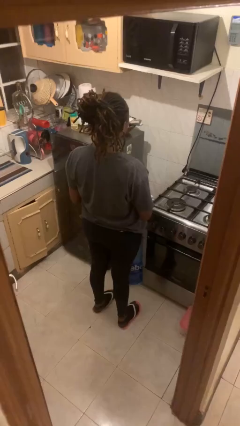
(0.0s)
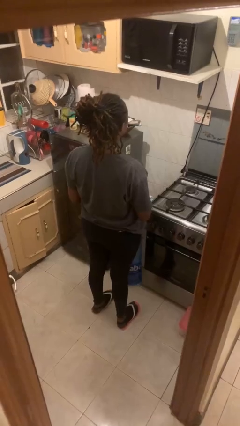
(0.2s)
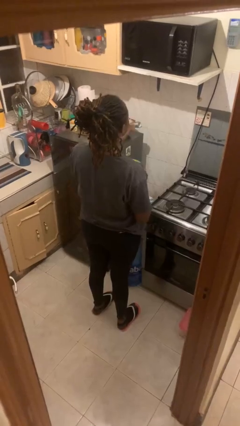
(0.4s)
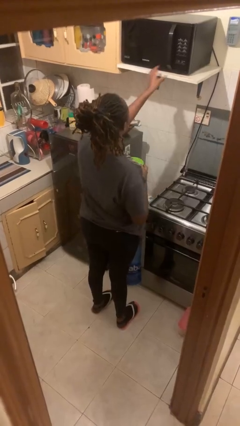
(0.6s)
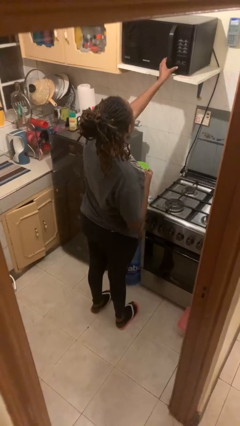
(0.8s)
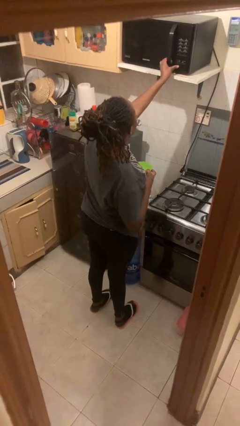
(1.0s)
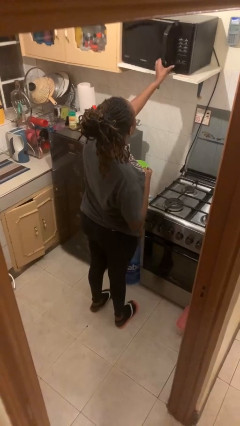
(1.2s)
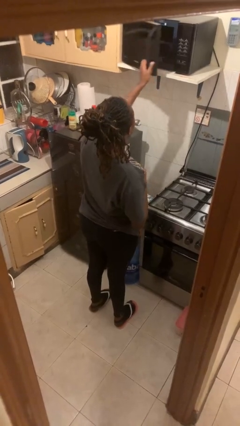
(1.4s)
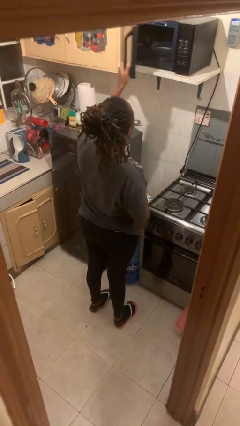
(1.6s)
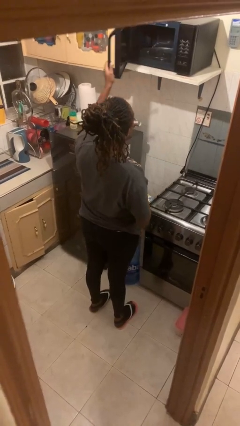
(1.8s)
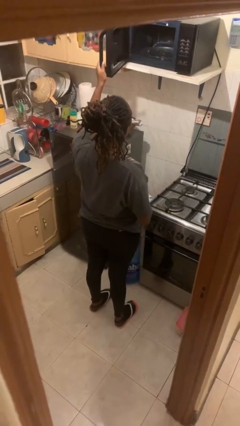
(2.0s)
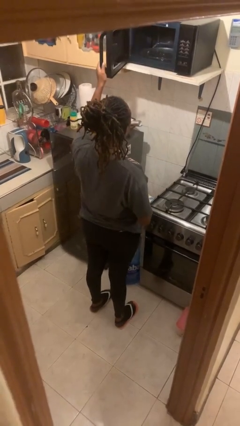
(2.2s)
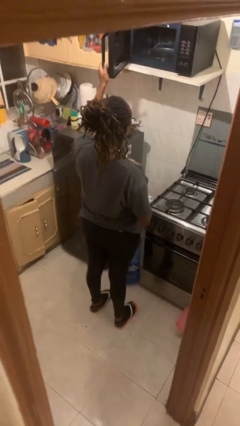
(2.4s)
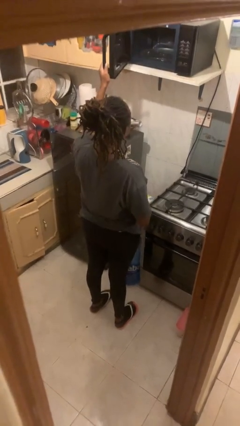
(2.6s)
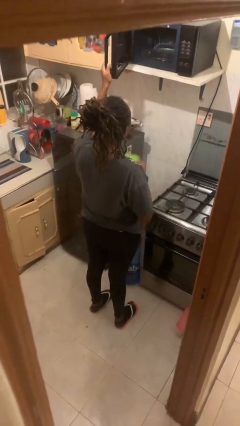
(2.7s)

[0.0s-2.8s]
person opens microwave

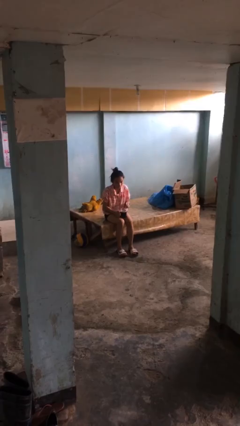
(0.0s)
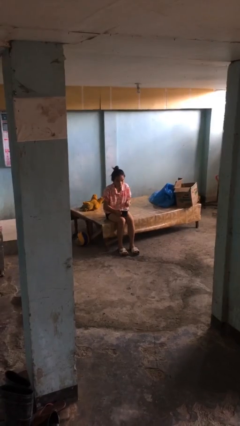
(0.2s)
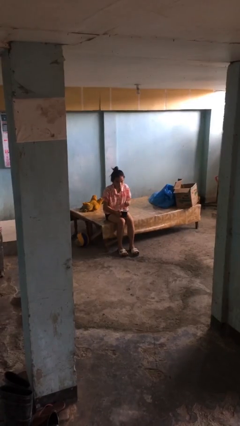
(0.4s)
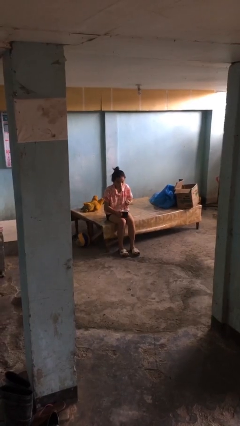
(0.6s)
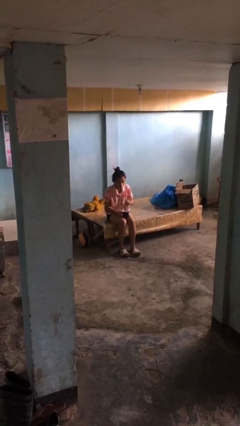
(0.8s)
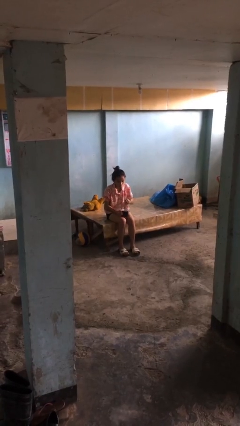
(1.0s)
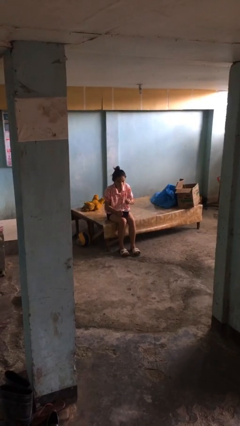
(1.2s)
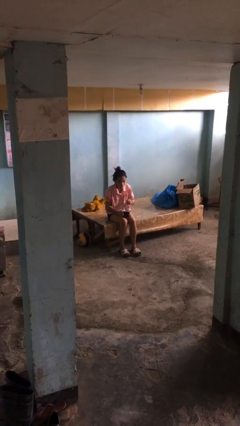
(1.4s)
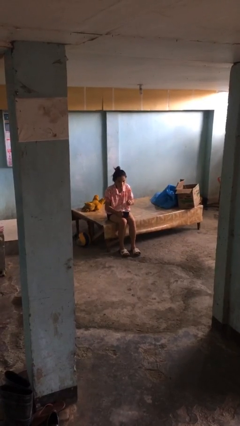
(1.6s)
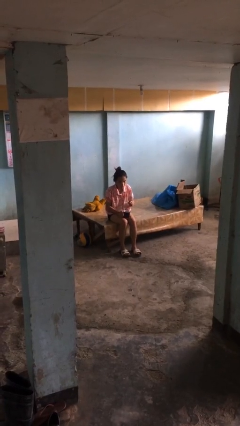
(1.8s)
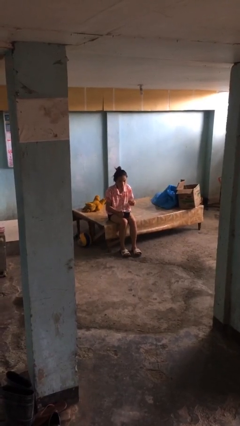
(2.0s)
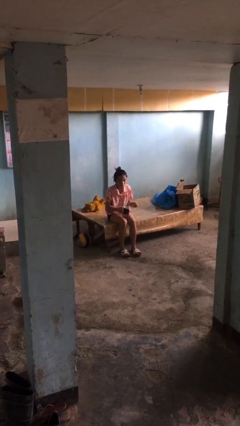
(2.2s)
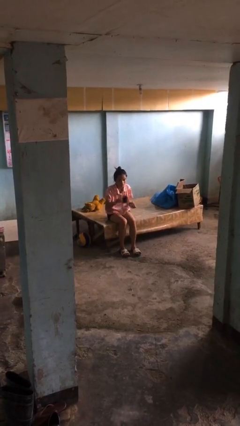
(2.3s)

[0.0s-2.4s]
person stirs mug

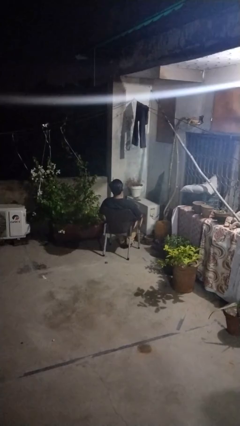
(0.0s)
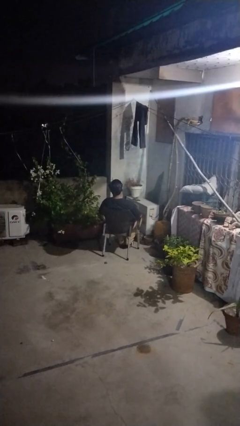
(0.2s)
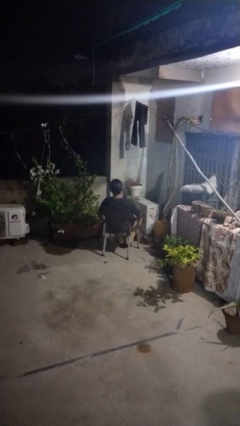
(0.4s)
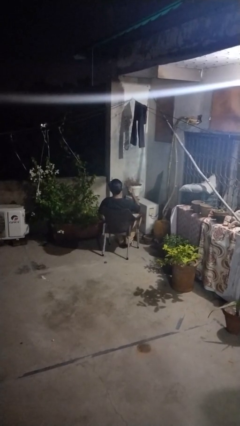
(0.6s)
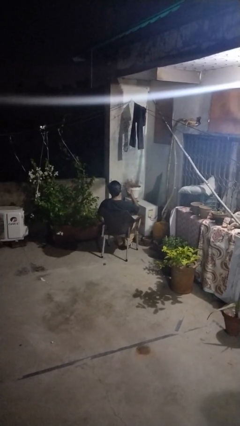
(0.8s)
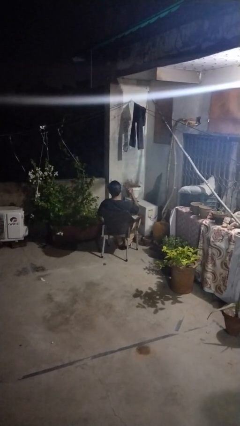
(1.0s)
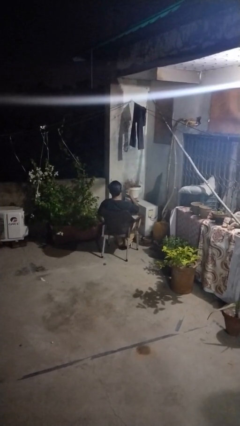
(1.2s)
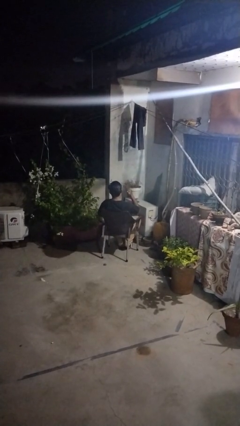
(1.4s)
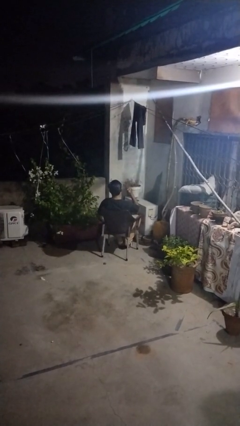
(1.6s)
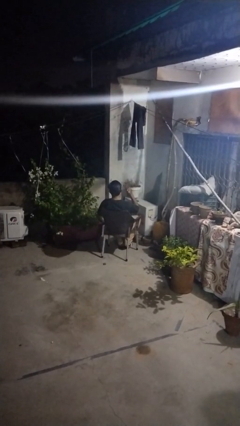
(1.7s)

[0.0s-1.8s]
person gestures behind me

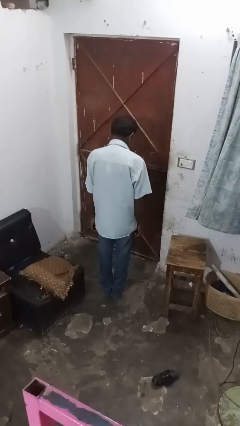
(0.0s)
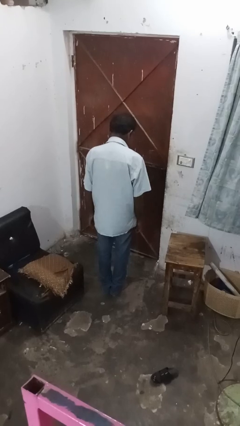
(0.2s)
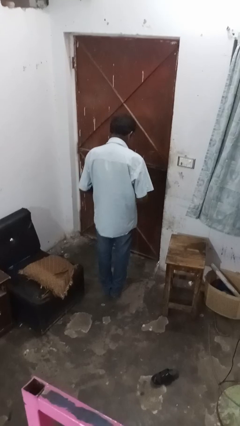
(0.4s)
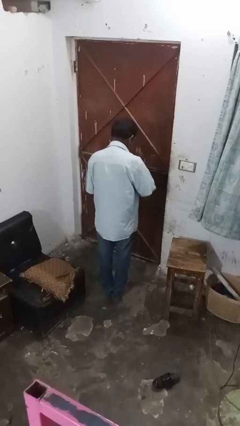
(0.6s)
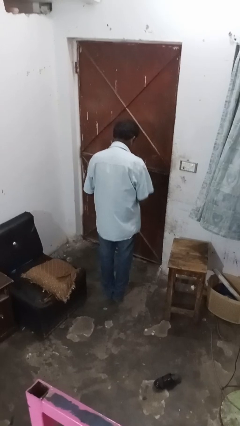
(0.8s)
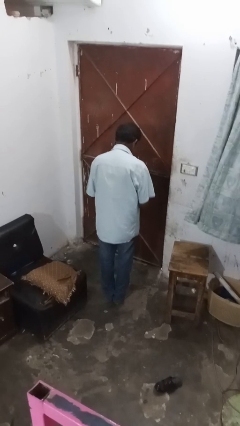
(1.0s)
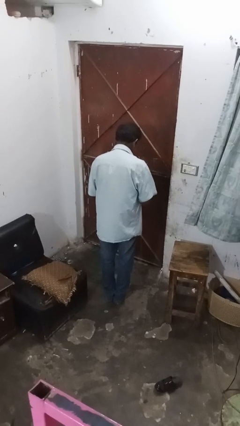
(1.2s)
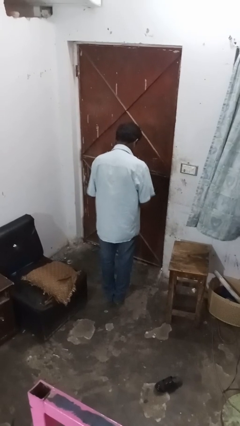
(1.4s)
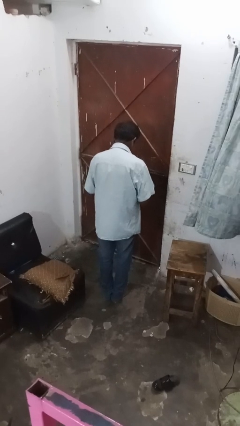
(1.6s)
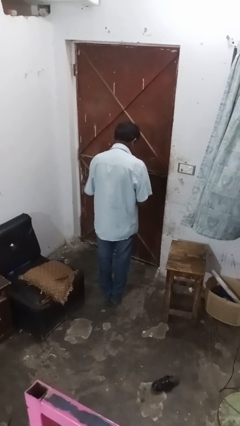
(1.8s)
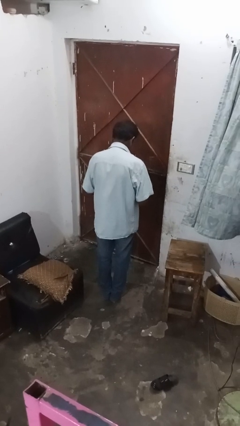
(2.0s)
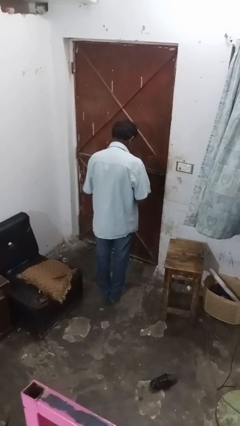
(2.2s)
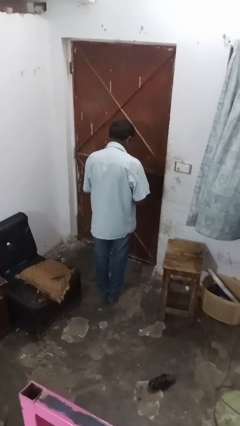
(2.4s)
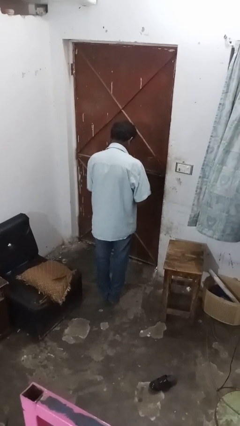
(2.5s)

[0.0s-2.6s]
person drums on chest

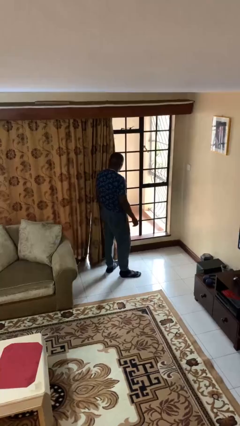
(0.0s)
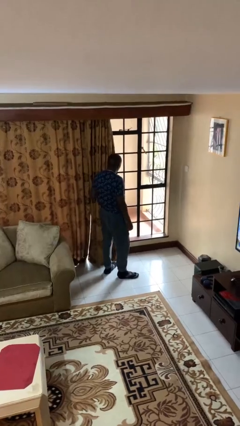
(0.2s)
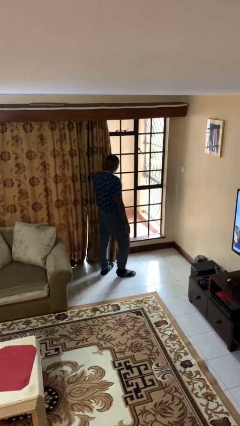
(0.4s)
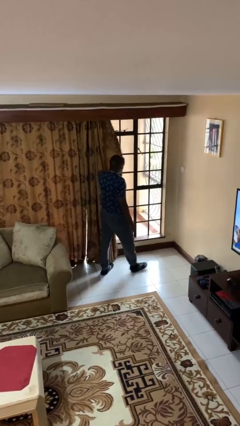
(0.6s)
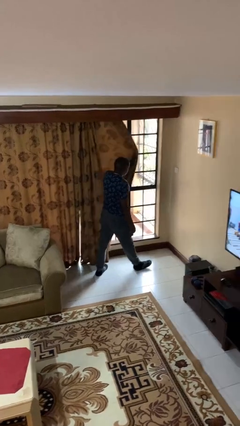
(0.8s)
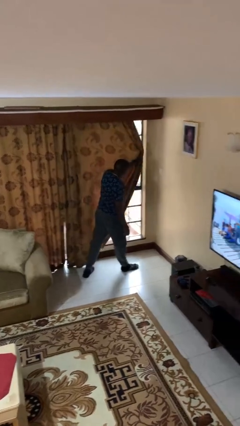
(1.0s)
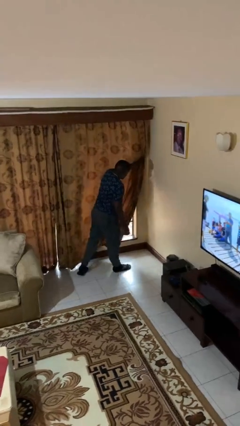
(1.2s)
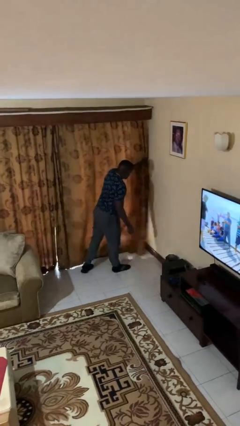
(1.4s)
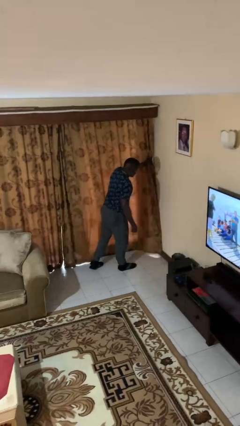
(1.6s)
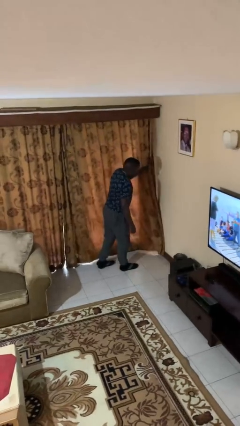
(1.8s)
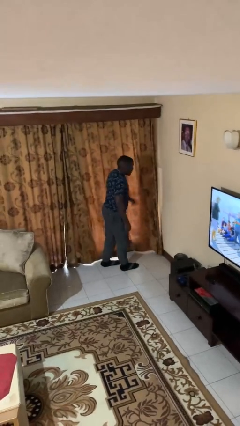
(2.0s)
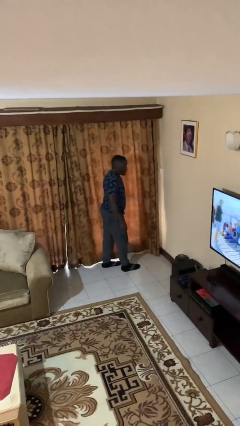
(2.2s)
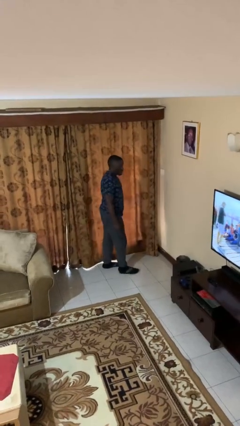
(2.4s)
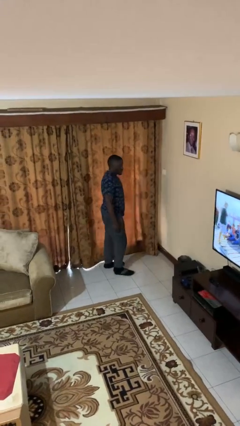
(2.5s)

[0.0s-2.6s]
person closes curtains

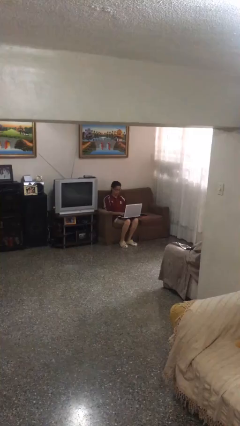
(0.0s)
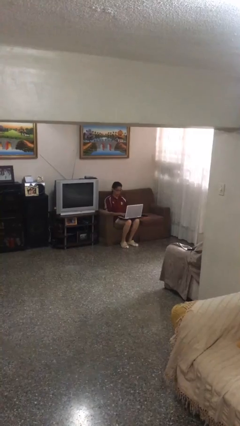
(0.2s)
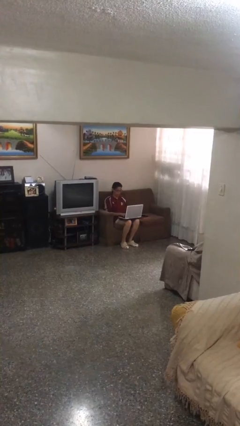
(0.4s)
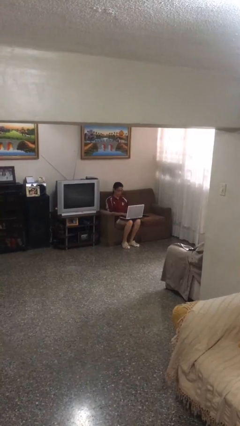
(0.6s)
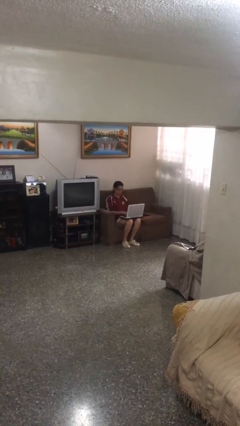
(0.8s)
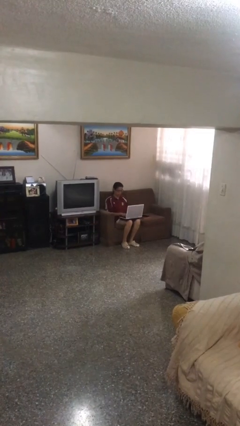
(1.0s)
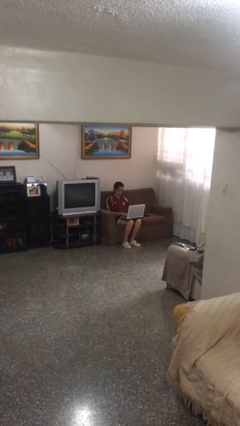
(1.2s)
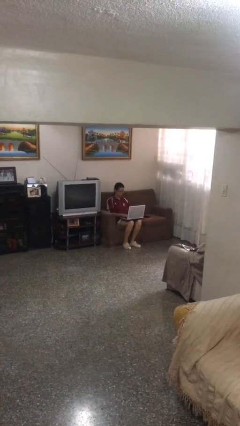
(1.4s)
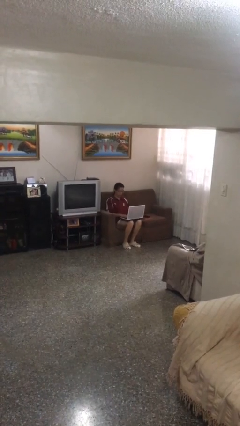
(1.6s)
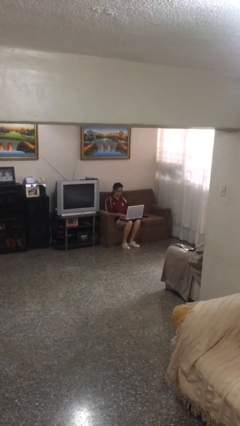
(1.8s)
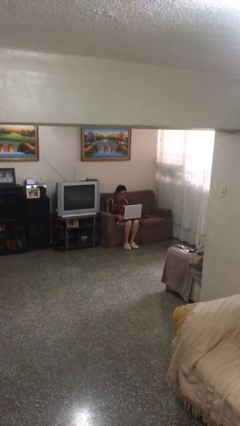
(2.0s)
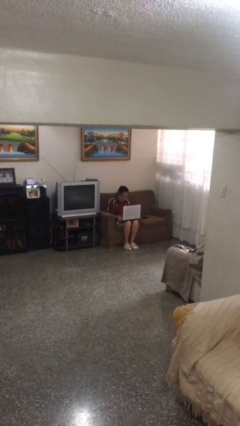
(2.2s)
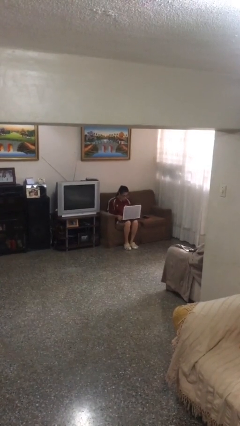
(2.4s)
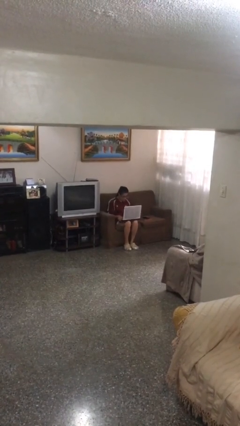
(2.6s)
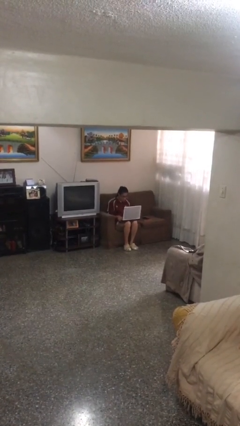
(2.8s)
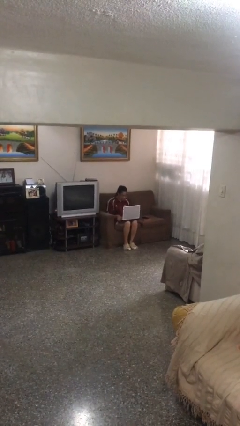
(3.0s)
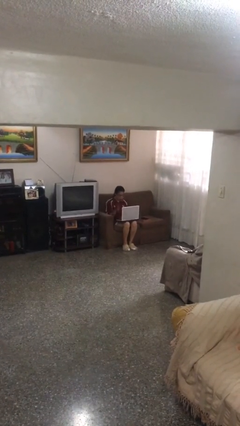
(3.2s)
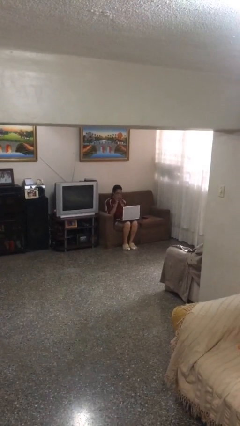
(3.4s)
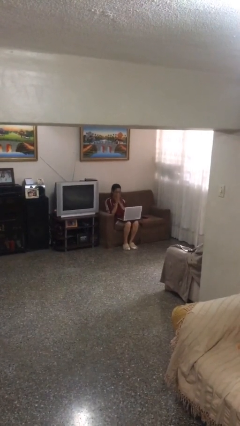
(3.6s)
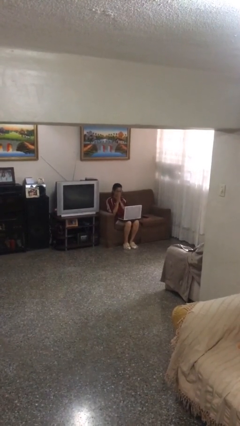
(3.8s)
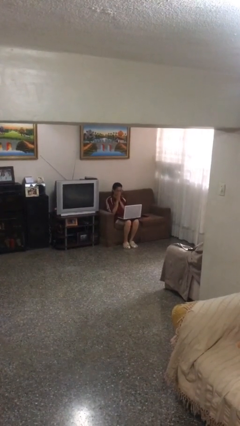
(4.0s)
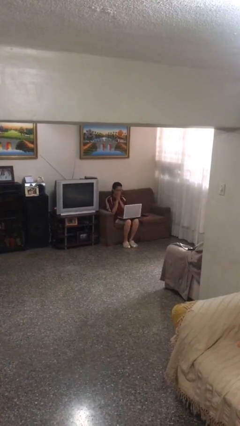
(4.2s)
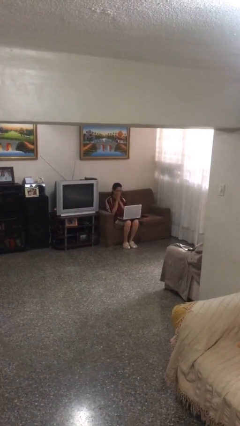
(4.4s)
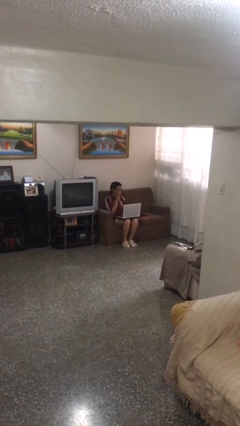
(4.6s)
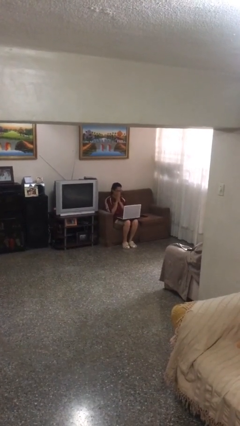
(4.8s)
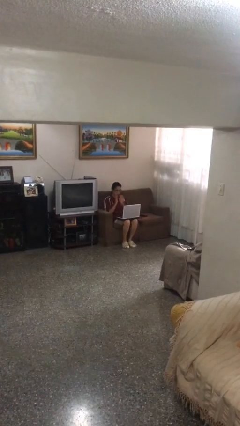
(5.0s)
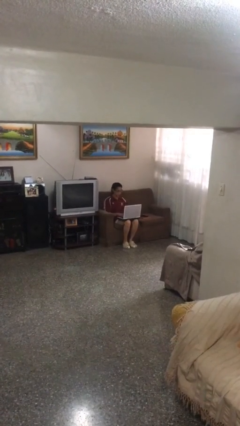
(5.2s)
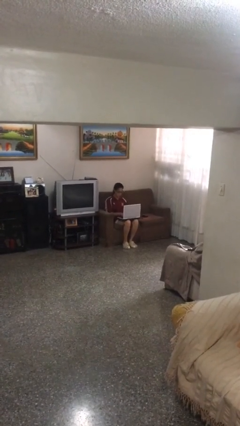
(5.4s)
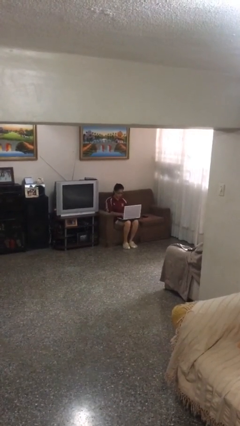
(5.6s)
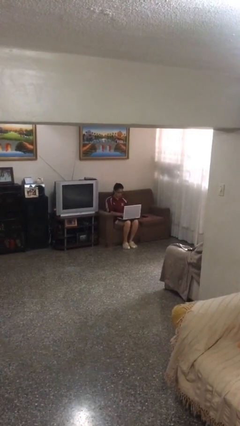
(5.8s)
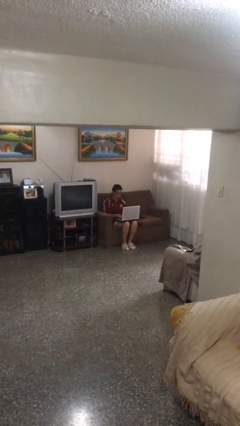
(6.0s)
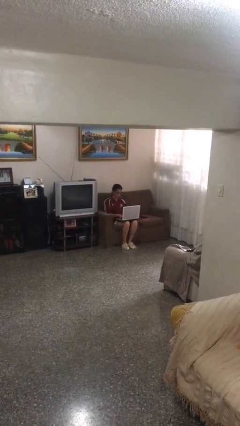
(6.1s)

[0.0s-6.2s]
person interacts with laptop
